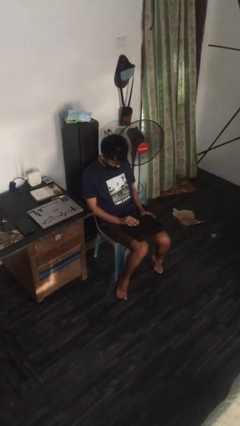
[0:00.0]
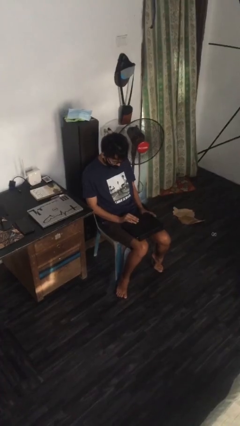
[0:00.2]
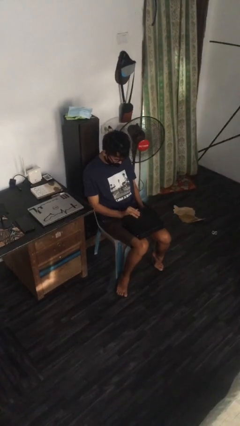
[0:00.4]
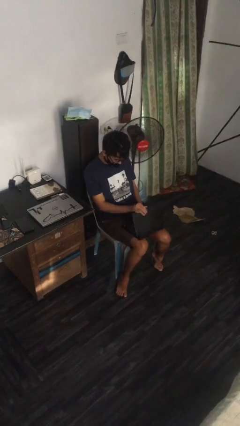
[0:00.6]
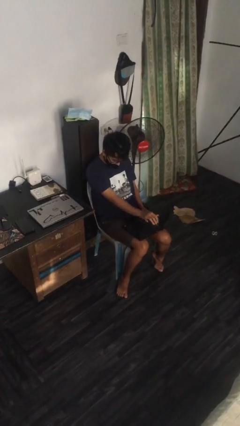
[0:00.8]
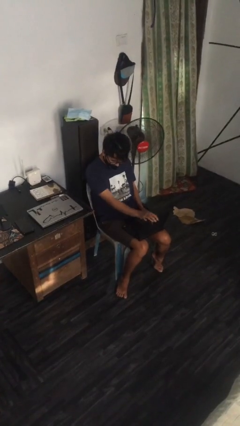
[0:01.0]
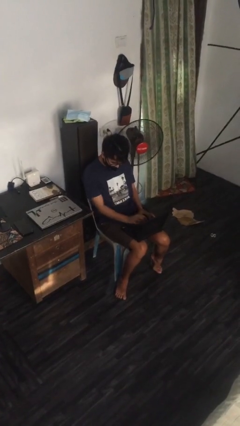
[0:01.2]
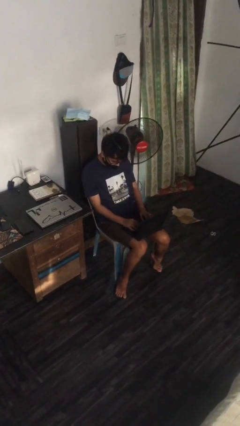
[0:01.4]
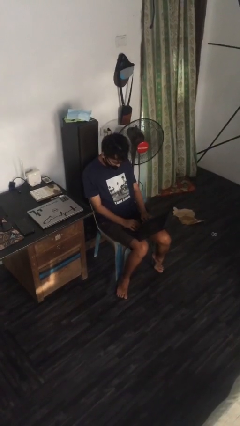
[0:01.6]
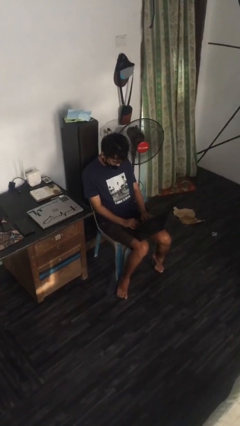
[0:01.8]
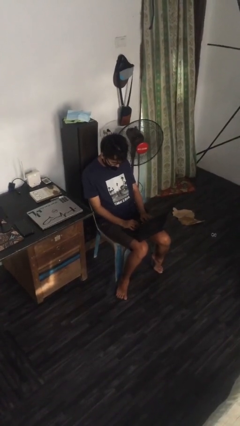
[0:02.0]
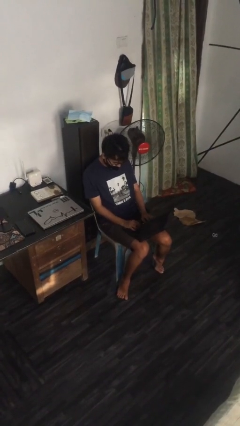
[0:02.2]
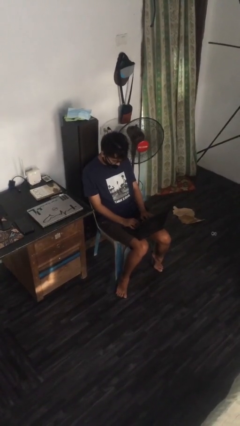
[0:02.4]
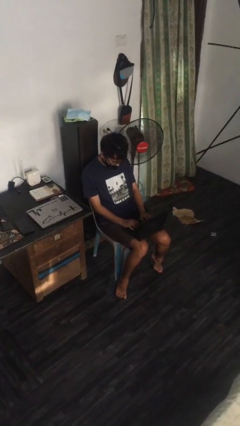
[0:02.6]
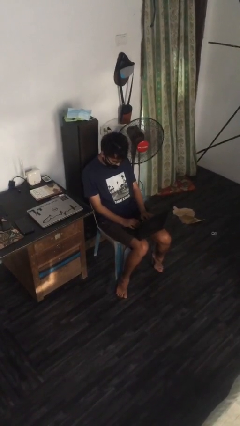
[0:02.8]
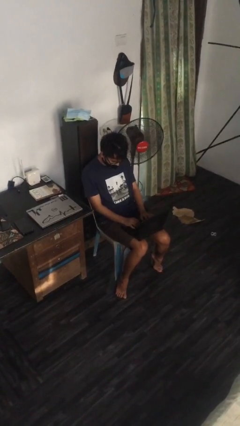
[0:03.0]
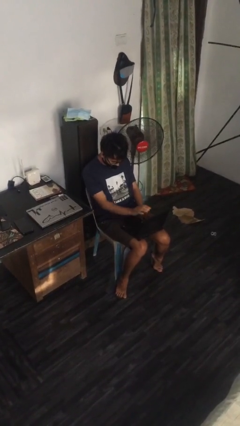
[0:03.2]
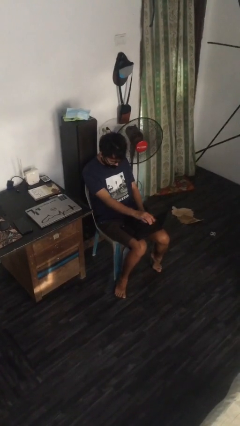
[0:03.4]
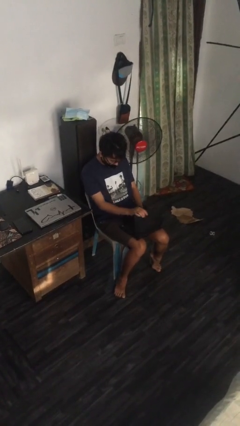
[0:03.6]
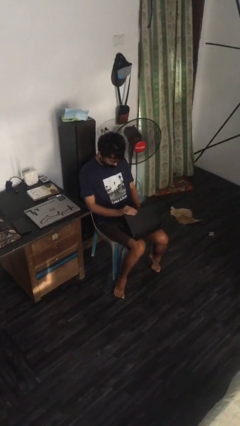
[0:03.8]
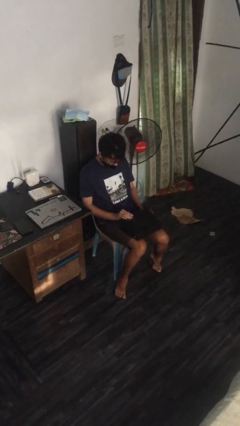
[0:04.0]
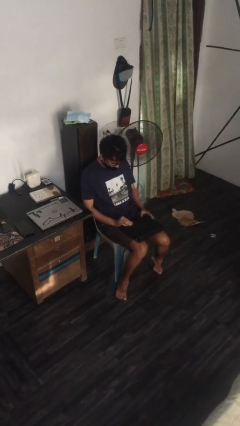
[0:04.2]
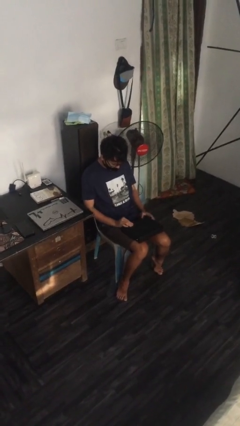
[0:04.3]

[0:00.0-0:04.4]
person interacts with laptop

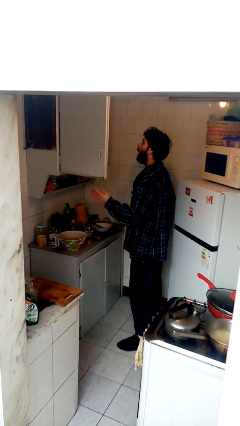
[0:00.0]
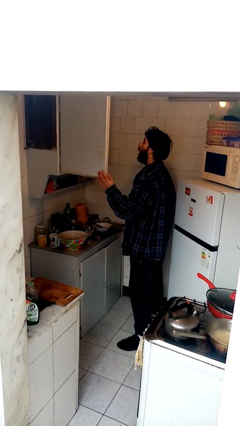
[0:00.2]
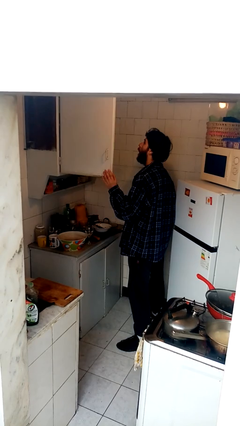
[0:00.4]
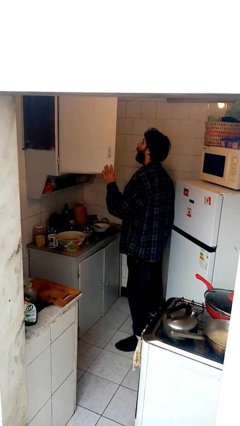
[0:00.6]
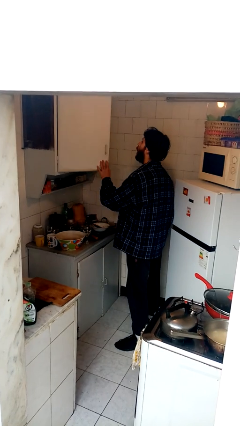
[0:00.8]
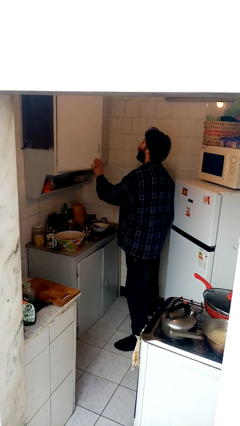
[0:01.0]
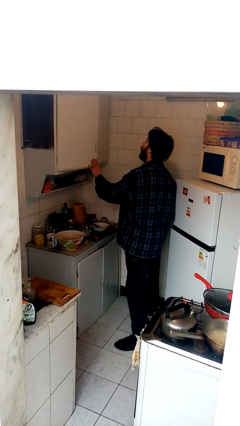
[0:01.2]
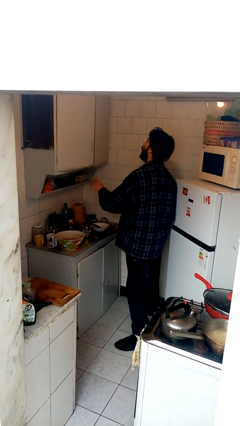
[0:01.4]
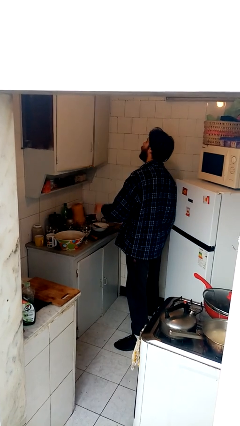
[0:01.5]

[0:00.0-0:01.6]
person closes cabinet

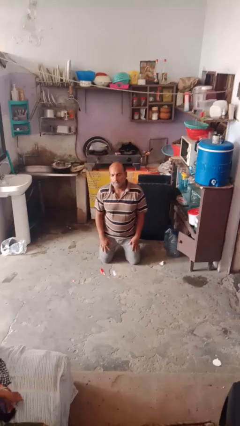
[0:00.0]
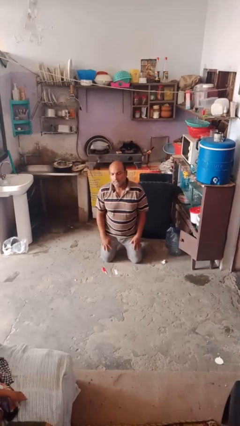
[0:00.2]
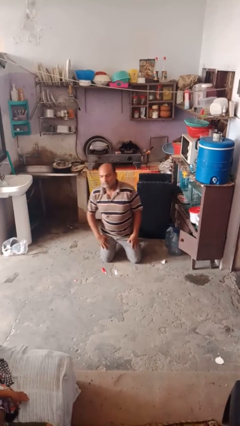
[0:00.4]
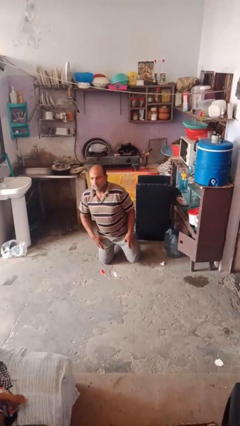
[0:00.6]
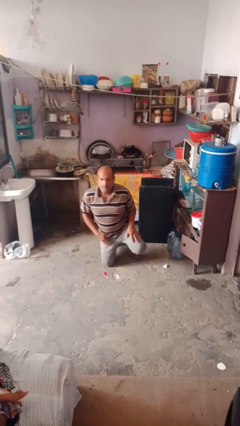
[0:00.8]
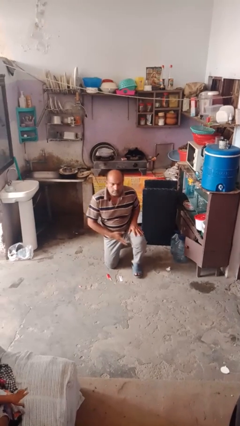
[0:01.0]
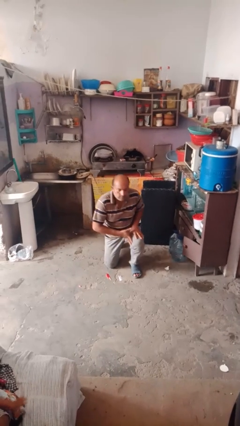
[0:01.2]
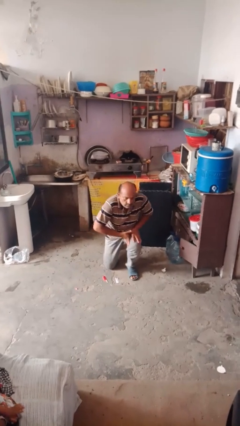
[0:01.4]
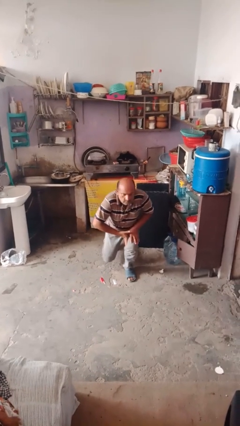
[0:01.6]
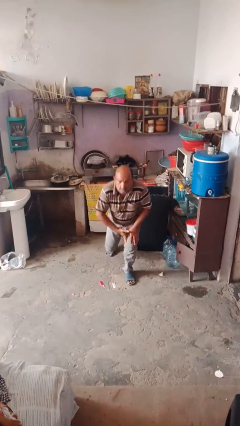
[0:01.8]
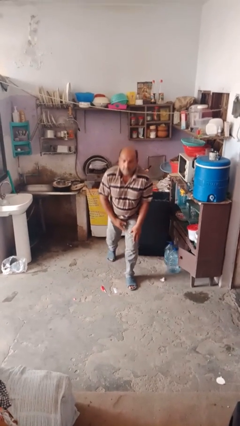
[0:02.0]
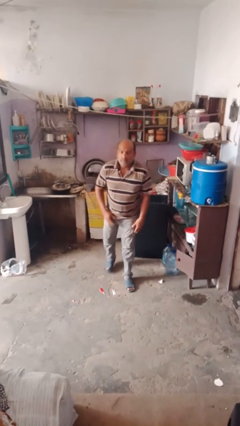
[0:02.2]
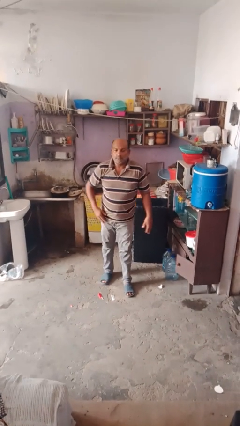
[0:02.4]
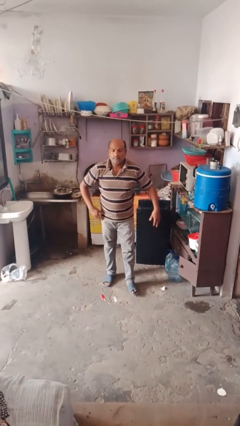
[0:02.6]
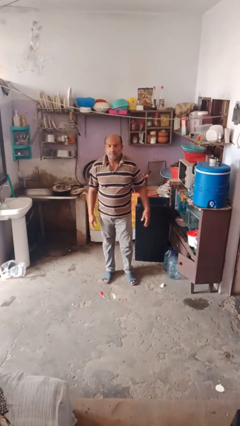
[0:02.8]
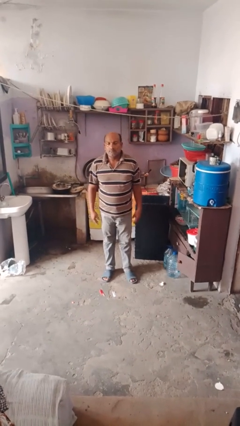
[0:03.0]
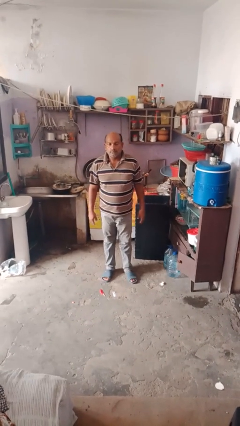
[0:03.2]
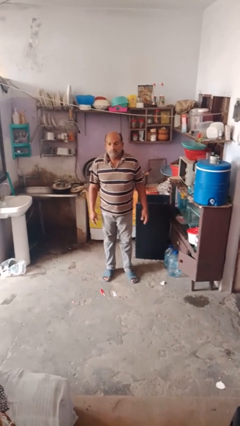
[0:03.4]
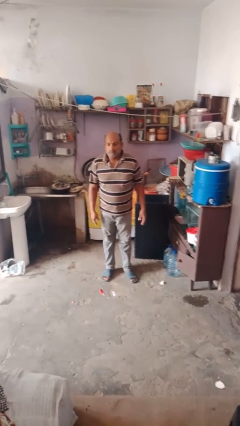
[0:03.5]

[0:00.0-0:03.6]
person stands up from floor

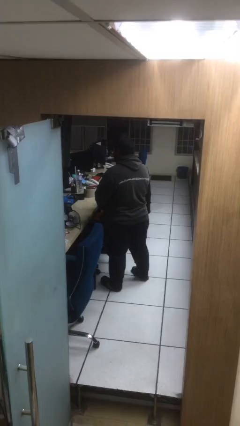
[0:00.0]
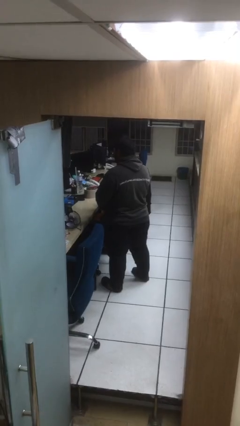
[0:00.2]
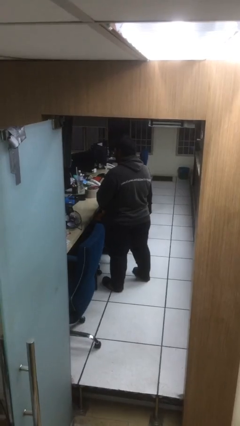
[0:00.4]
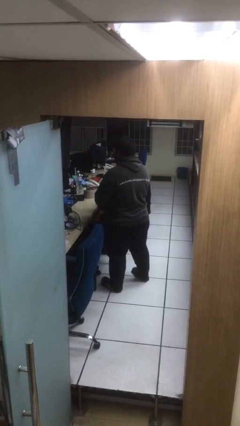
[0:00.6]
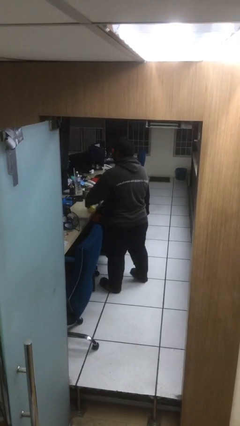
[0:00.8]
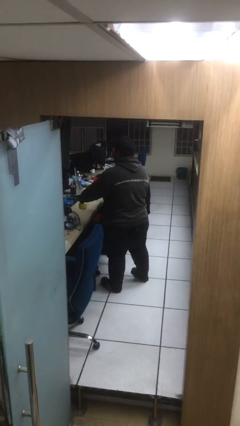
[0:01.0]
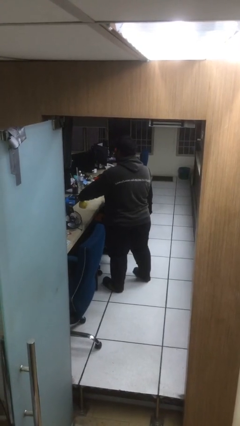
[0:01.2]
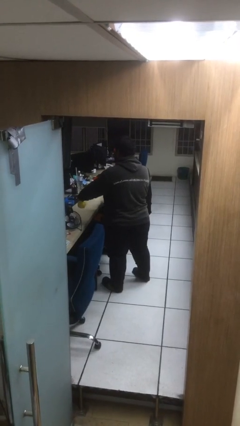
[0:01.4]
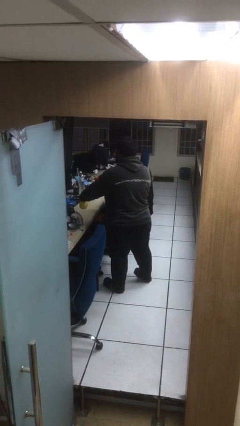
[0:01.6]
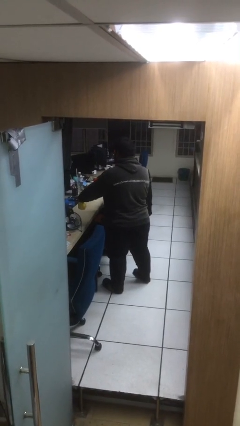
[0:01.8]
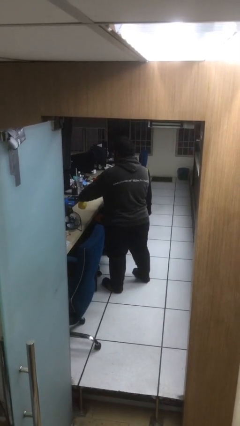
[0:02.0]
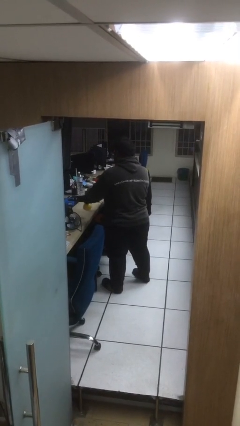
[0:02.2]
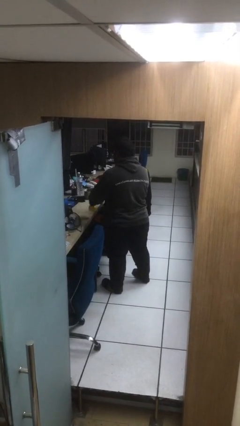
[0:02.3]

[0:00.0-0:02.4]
person sprays from bottle

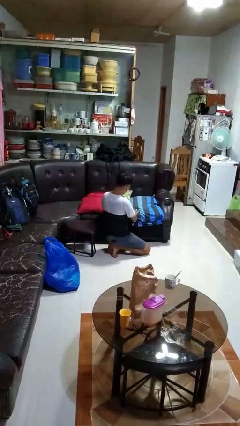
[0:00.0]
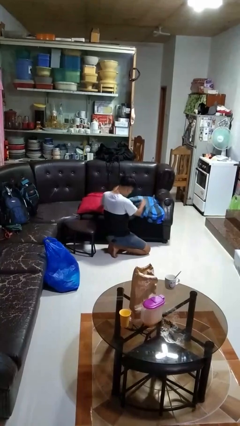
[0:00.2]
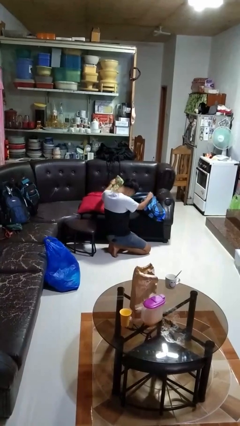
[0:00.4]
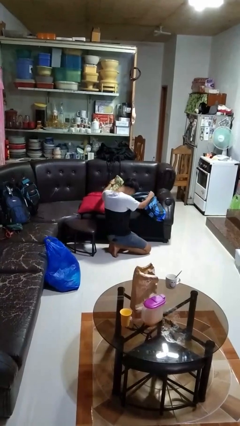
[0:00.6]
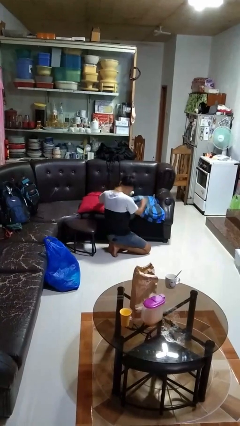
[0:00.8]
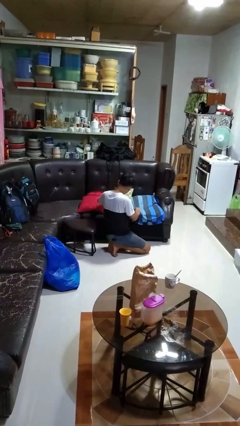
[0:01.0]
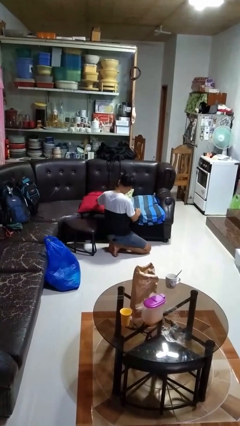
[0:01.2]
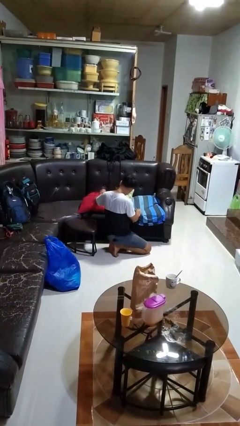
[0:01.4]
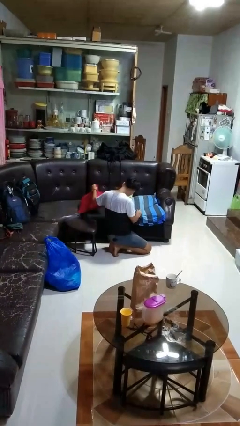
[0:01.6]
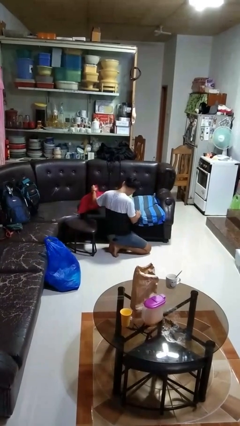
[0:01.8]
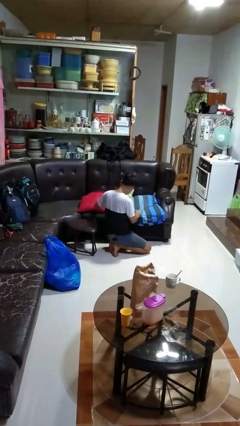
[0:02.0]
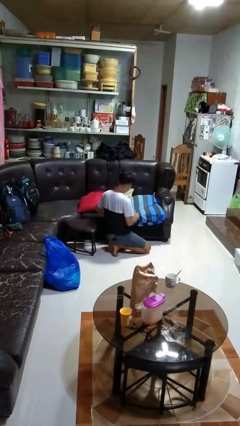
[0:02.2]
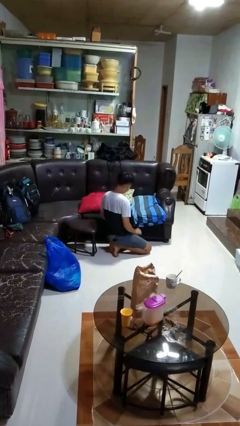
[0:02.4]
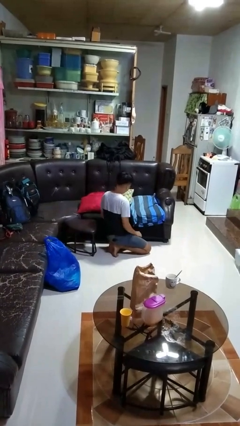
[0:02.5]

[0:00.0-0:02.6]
person searches in couch

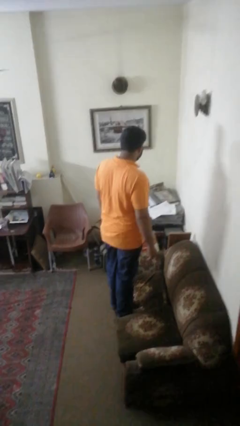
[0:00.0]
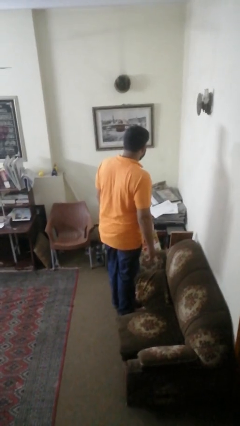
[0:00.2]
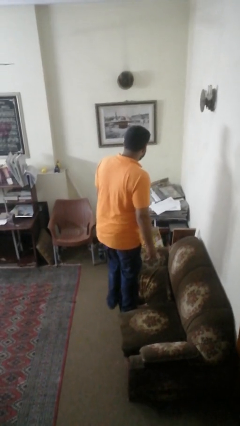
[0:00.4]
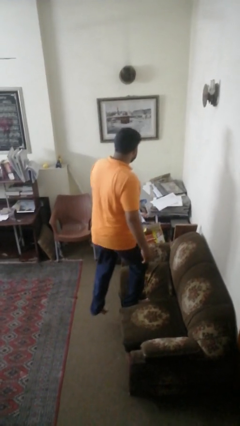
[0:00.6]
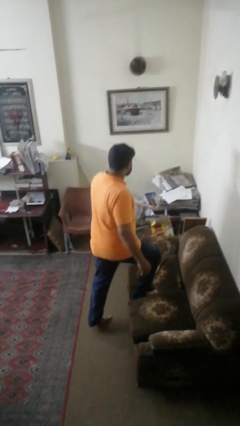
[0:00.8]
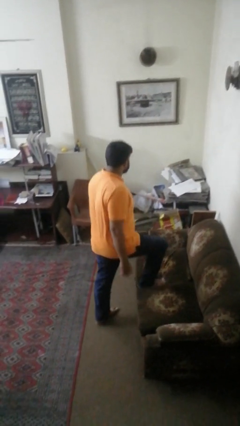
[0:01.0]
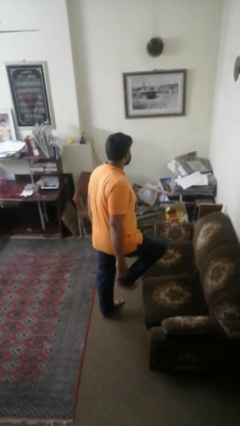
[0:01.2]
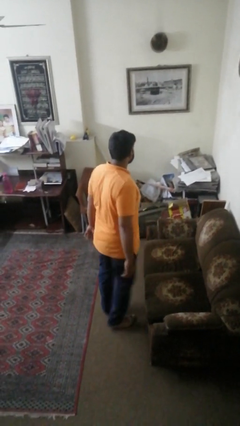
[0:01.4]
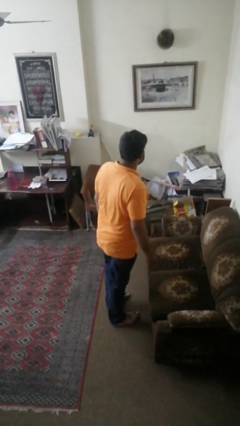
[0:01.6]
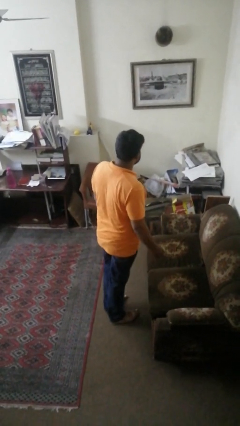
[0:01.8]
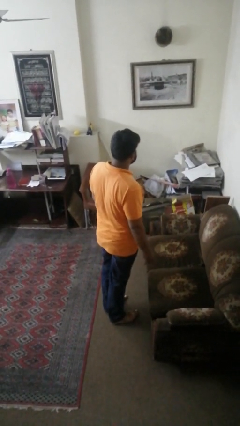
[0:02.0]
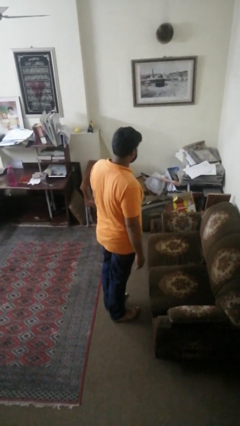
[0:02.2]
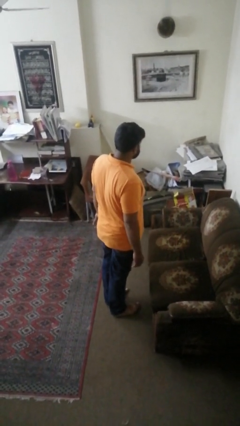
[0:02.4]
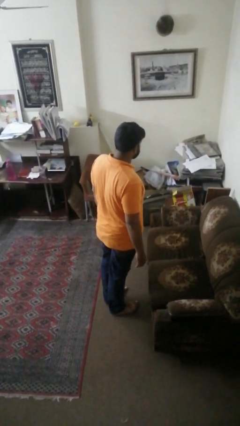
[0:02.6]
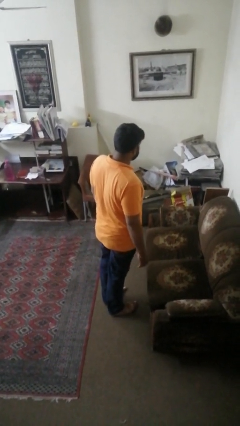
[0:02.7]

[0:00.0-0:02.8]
person climbs off couch

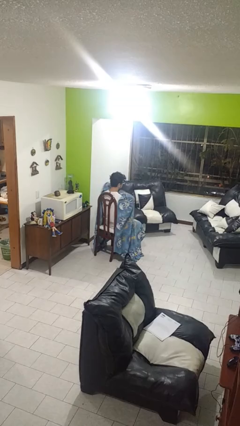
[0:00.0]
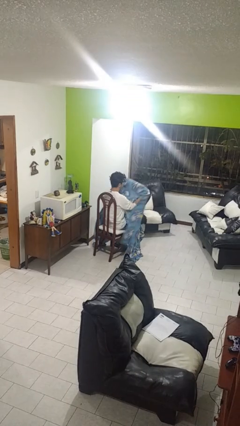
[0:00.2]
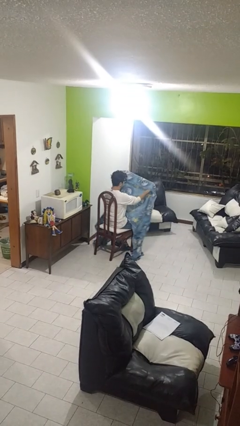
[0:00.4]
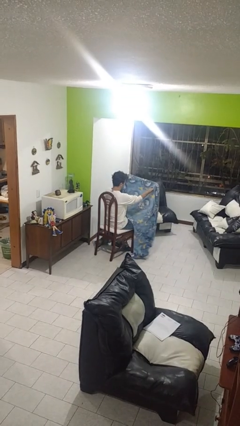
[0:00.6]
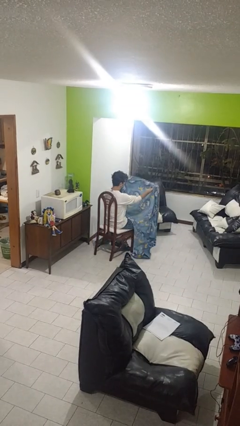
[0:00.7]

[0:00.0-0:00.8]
person uncovers with blanket
